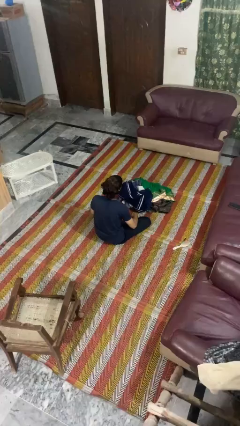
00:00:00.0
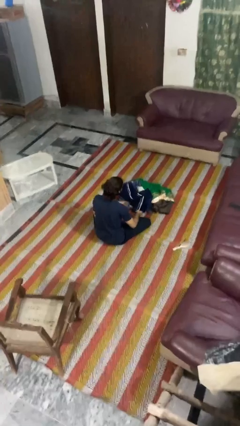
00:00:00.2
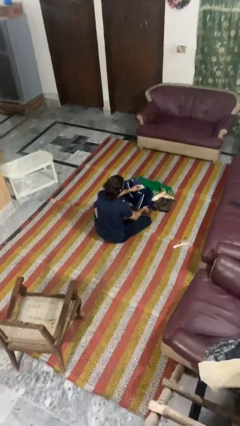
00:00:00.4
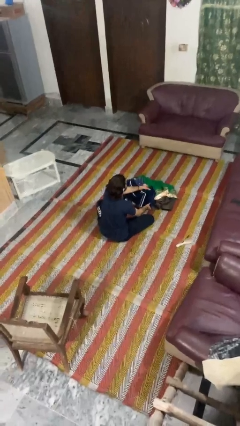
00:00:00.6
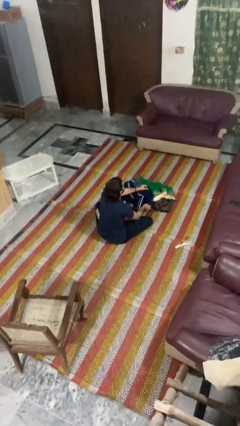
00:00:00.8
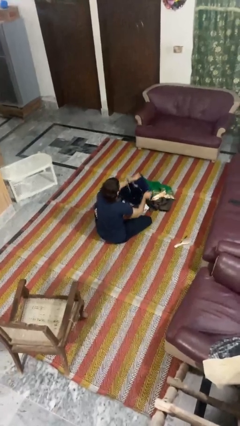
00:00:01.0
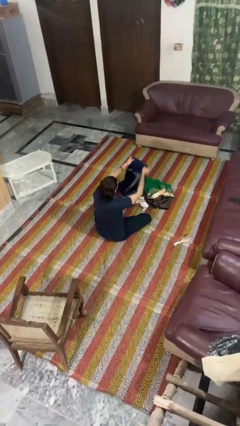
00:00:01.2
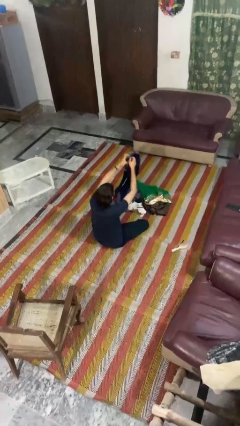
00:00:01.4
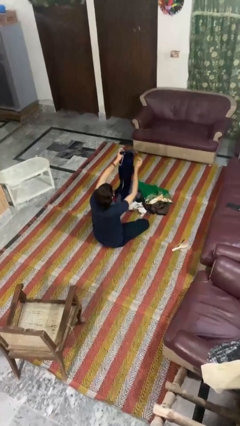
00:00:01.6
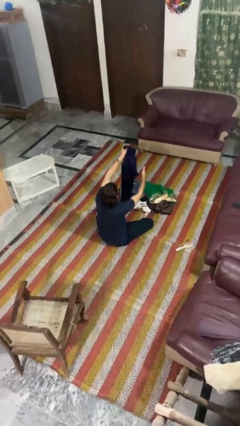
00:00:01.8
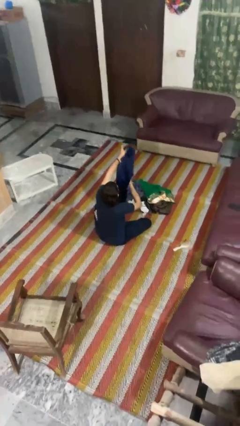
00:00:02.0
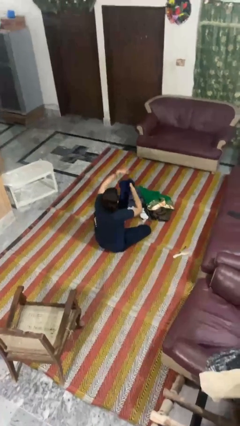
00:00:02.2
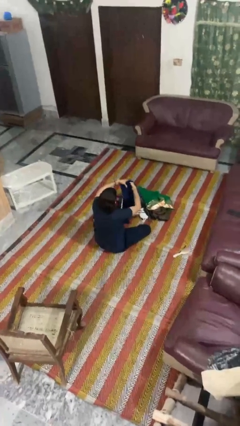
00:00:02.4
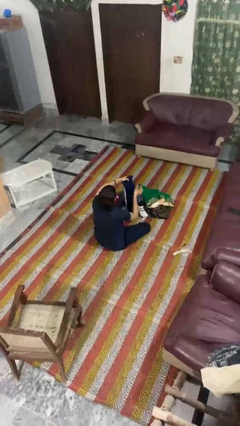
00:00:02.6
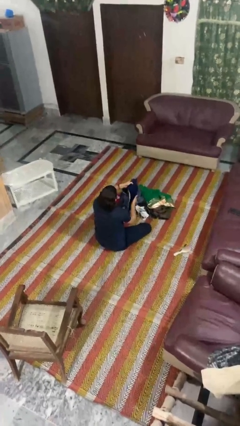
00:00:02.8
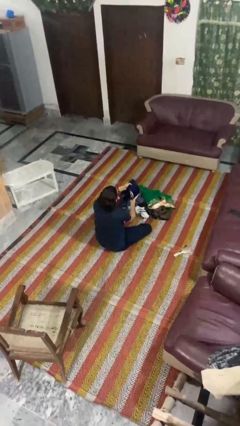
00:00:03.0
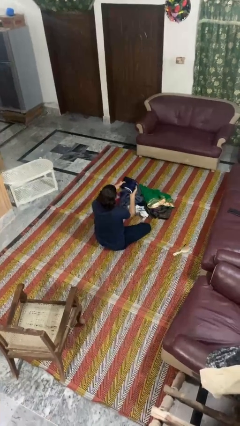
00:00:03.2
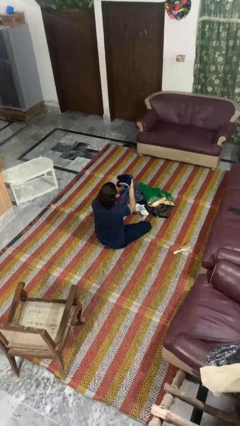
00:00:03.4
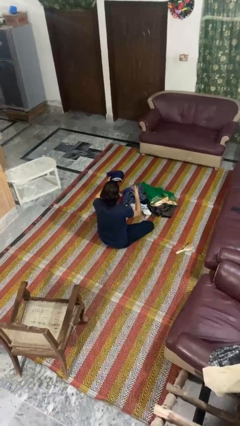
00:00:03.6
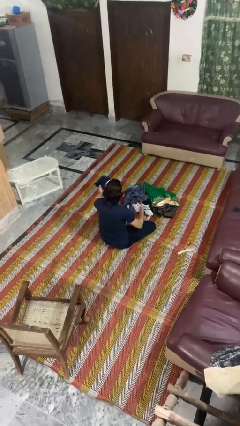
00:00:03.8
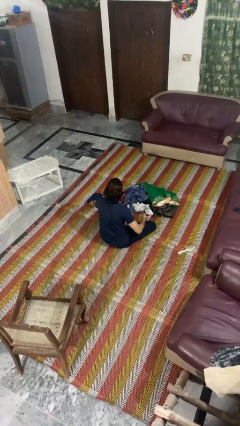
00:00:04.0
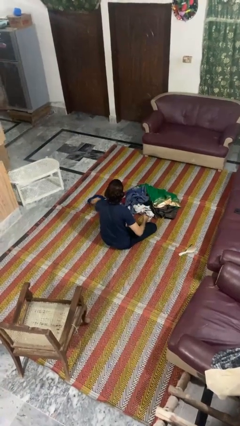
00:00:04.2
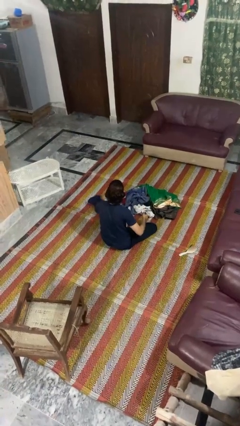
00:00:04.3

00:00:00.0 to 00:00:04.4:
person folds pants

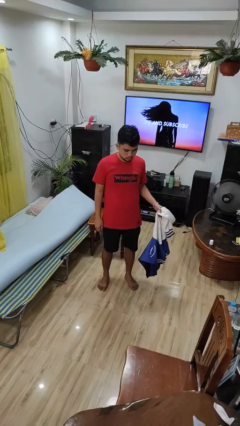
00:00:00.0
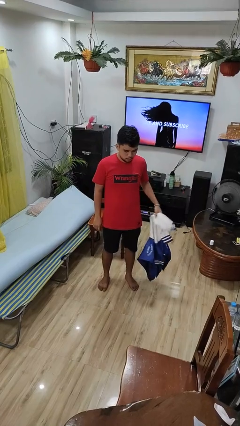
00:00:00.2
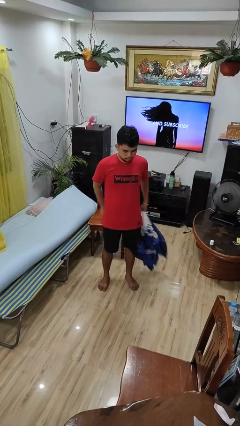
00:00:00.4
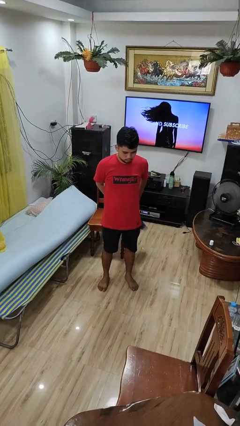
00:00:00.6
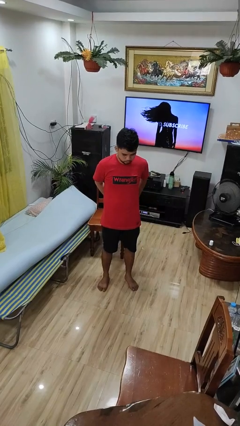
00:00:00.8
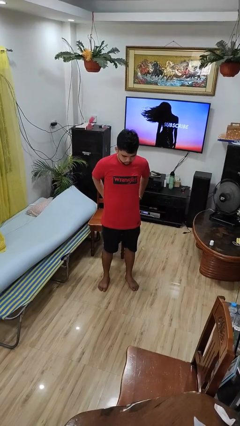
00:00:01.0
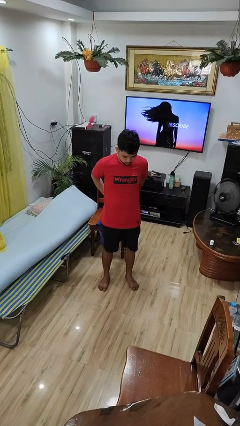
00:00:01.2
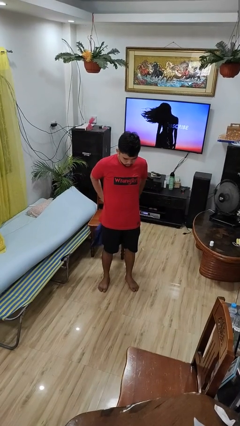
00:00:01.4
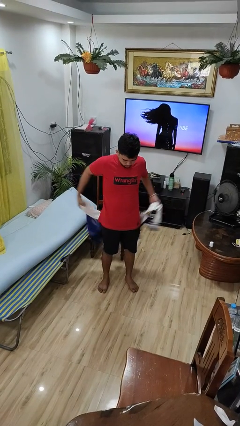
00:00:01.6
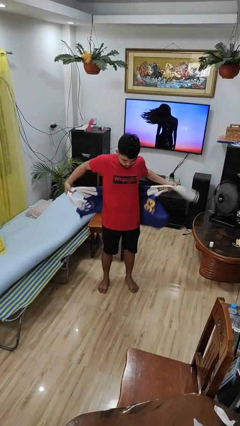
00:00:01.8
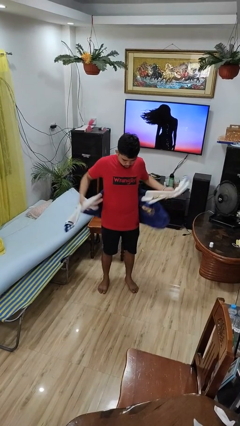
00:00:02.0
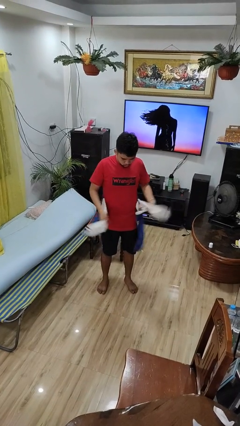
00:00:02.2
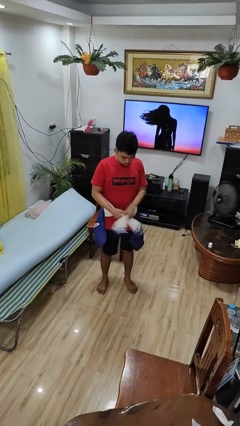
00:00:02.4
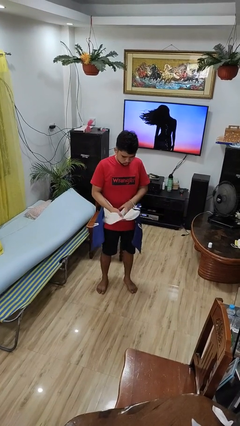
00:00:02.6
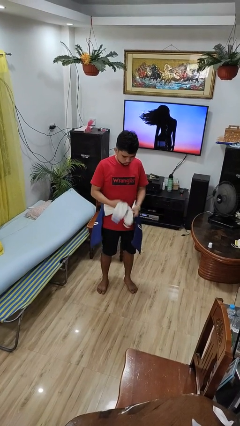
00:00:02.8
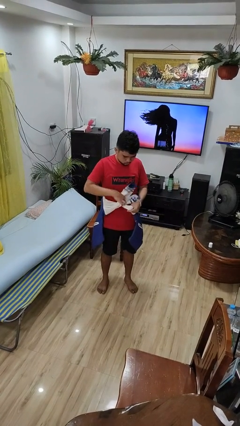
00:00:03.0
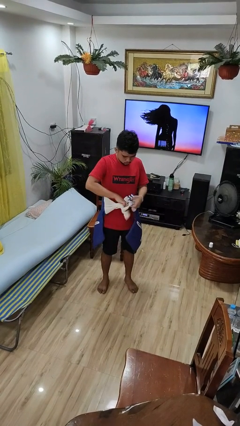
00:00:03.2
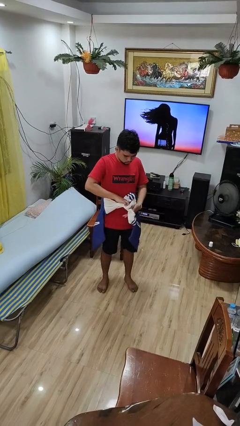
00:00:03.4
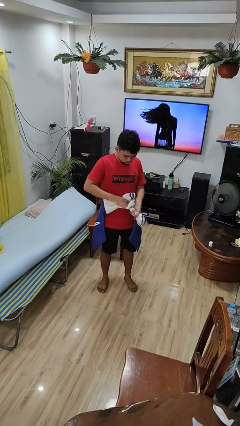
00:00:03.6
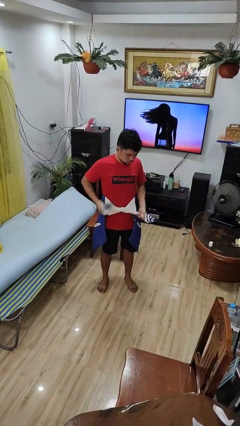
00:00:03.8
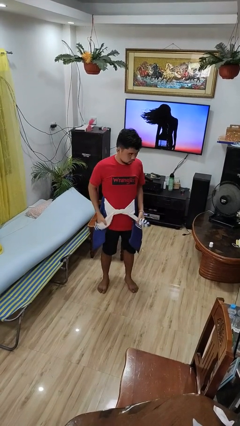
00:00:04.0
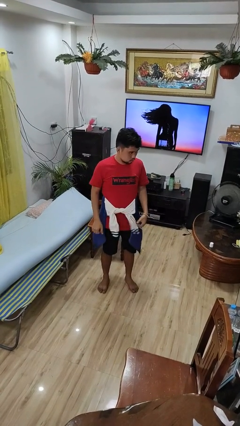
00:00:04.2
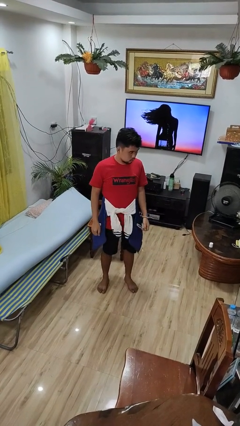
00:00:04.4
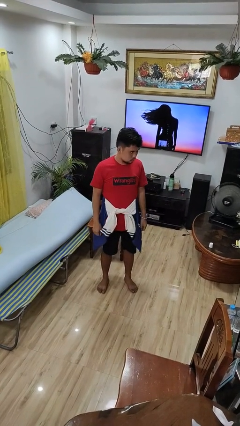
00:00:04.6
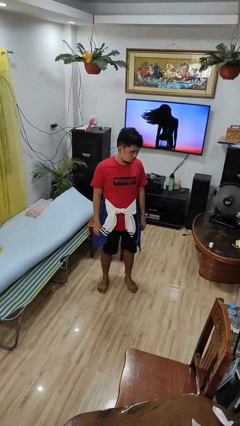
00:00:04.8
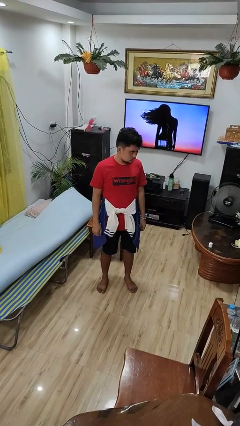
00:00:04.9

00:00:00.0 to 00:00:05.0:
person ties jacket around waist

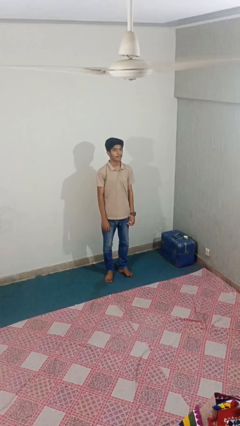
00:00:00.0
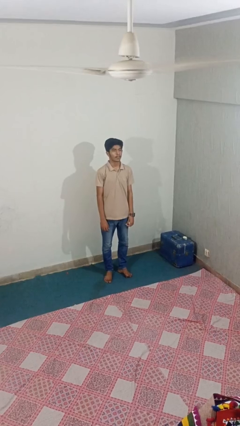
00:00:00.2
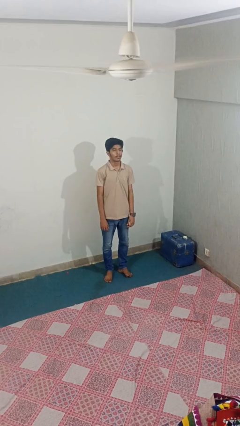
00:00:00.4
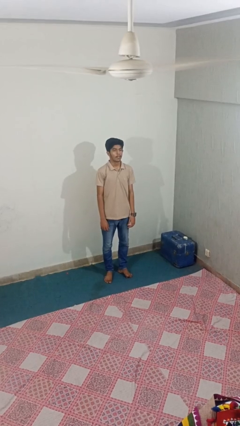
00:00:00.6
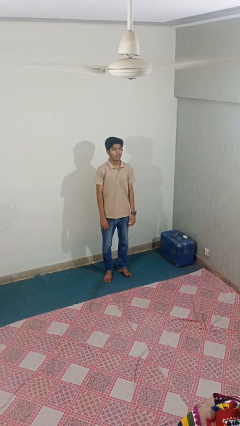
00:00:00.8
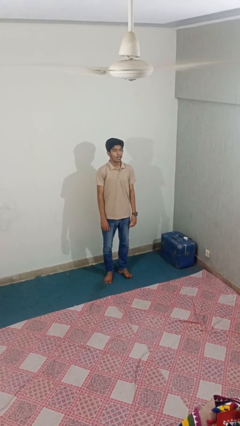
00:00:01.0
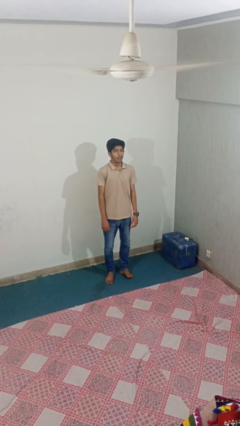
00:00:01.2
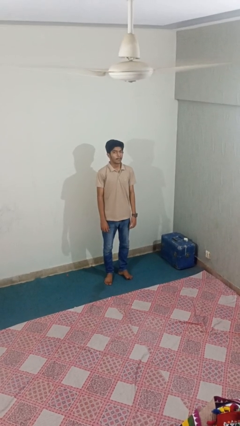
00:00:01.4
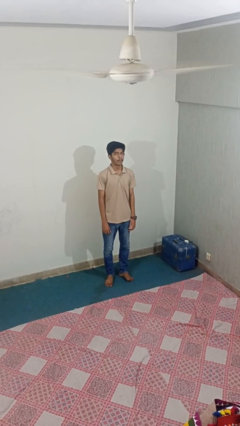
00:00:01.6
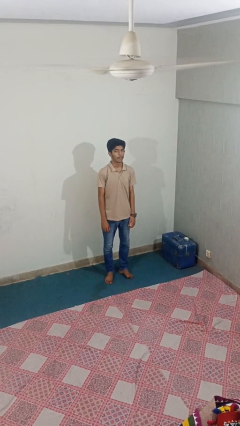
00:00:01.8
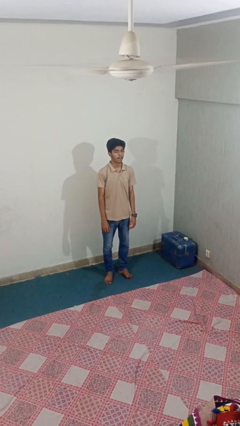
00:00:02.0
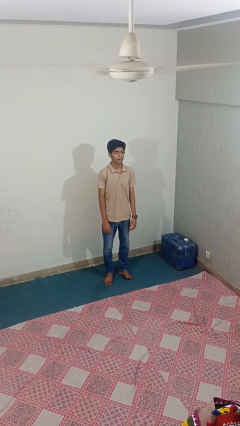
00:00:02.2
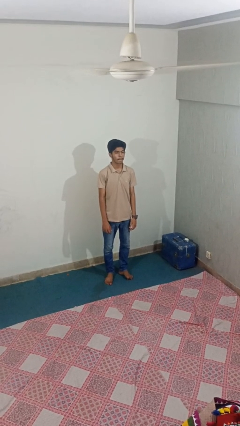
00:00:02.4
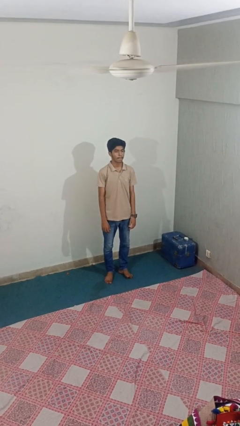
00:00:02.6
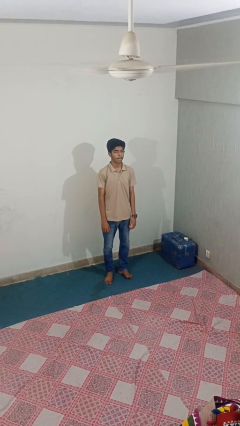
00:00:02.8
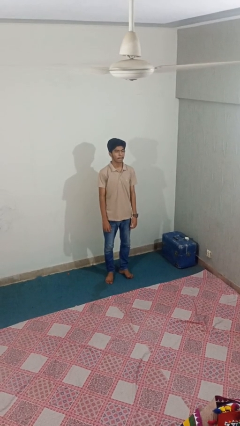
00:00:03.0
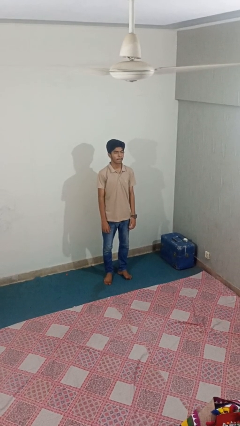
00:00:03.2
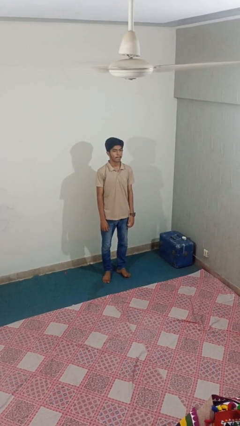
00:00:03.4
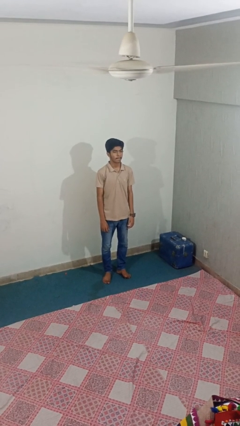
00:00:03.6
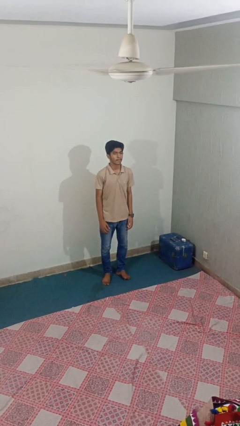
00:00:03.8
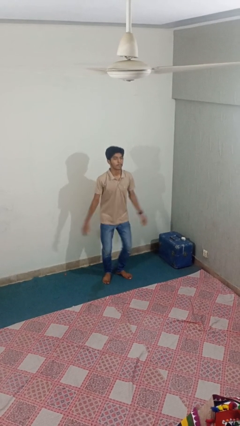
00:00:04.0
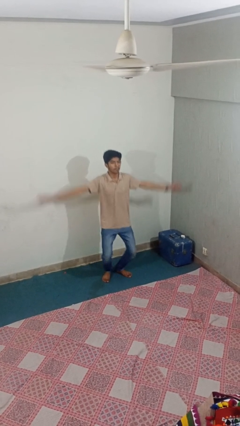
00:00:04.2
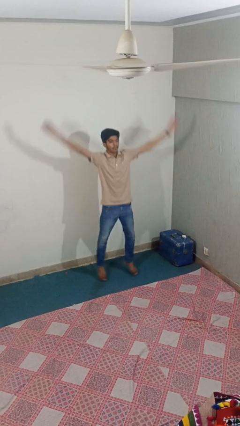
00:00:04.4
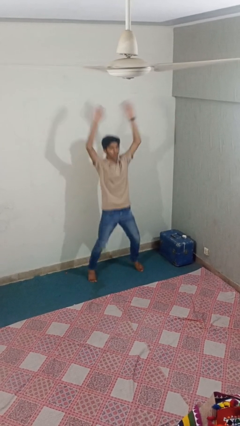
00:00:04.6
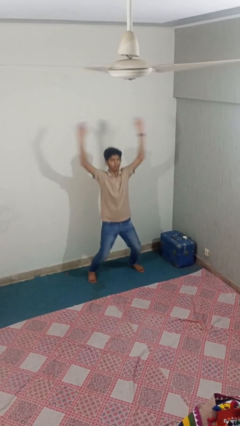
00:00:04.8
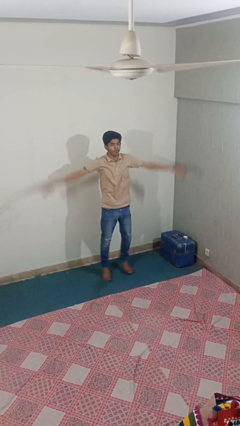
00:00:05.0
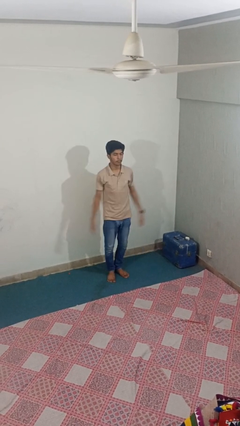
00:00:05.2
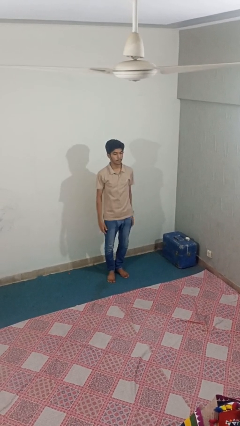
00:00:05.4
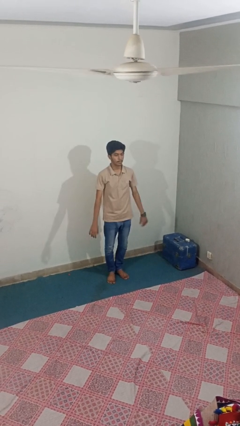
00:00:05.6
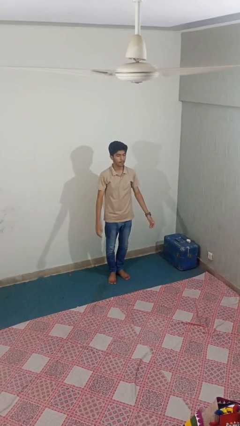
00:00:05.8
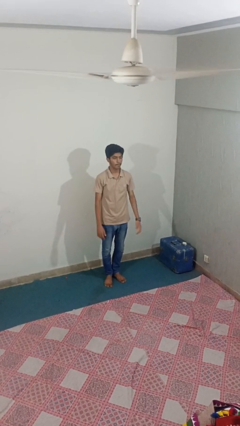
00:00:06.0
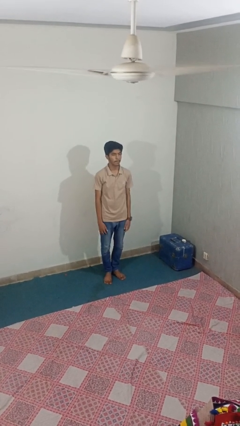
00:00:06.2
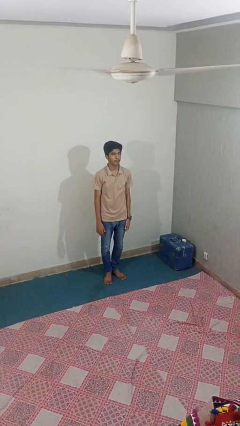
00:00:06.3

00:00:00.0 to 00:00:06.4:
person exercises with jumping jacks

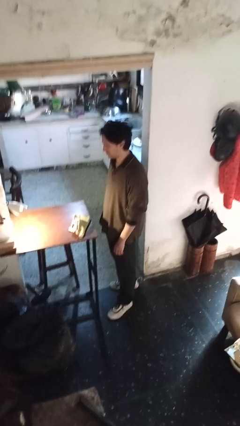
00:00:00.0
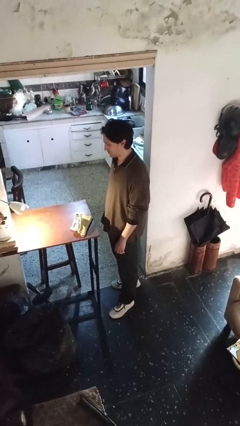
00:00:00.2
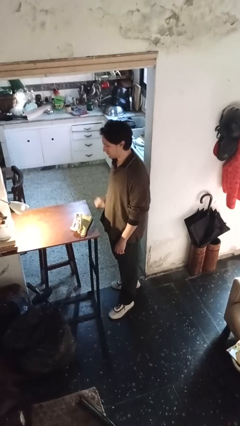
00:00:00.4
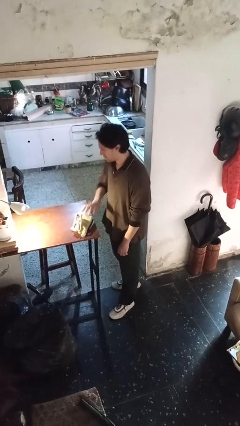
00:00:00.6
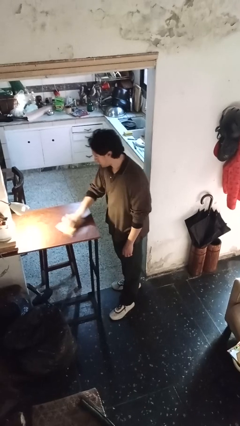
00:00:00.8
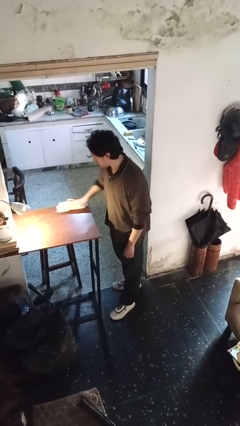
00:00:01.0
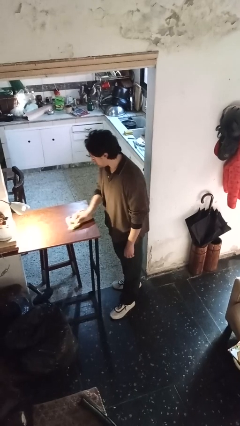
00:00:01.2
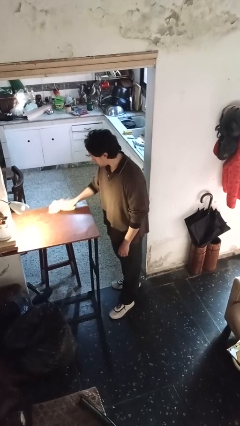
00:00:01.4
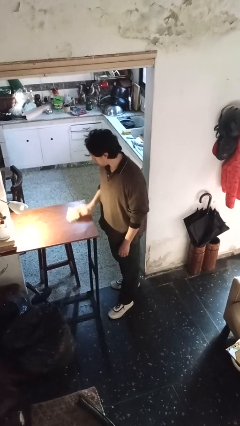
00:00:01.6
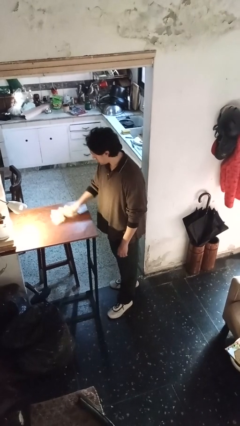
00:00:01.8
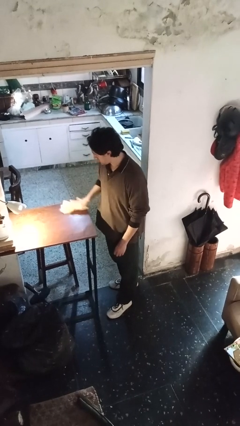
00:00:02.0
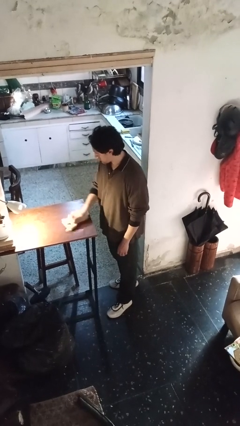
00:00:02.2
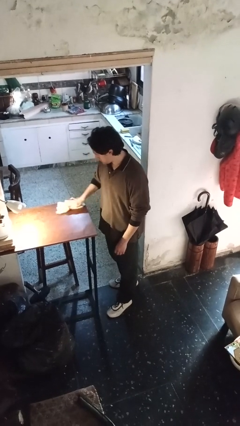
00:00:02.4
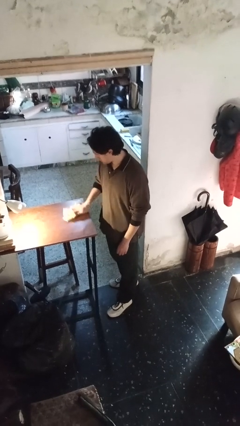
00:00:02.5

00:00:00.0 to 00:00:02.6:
person cleans table with rag
